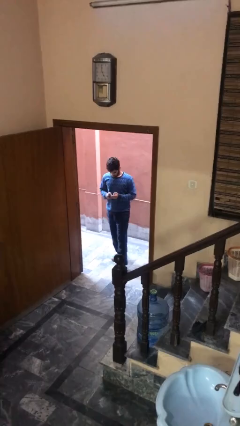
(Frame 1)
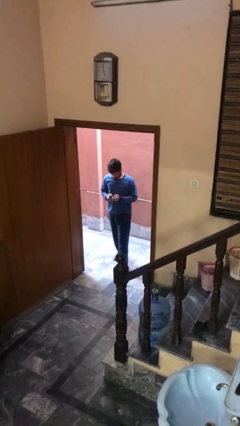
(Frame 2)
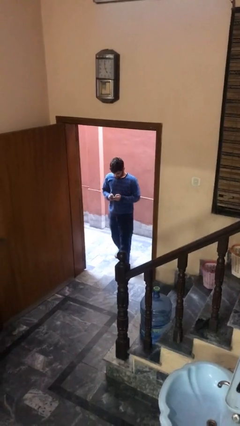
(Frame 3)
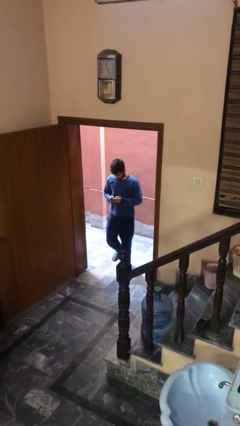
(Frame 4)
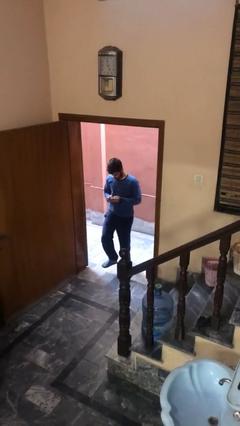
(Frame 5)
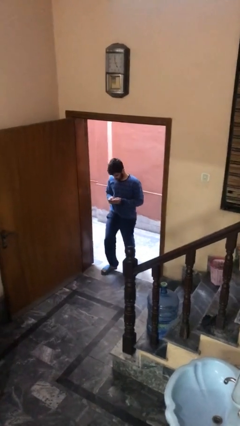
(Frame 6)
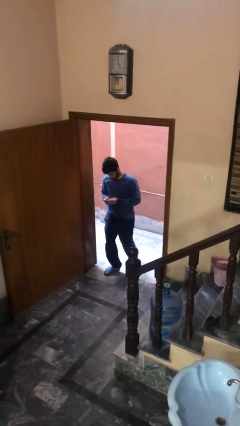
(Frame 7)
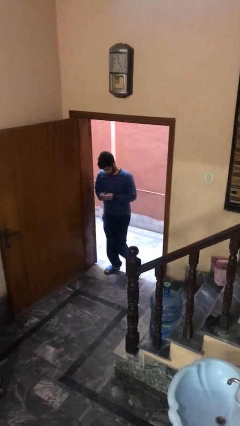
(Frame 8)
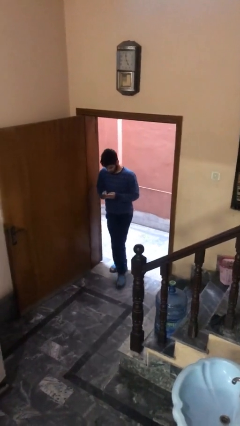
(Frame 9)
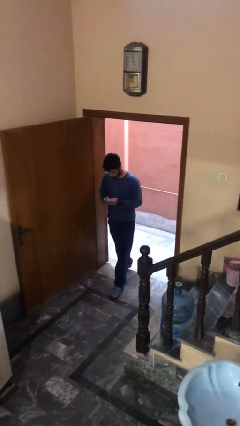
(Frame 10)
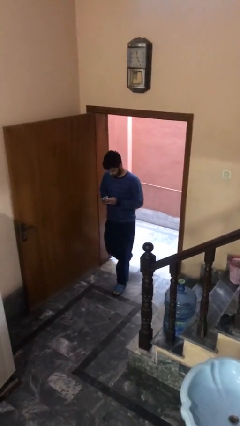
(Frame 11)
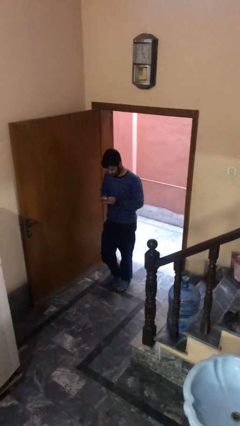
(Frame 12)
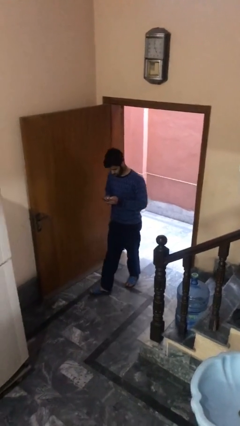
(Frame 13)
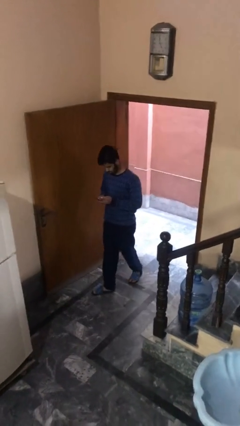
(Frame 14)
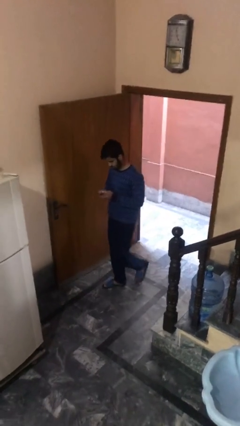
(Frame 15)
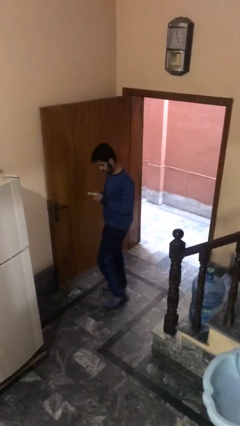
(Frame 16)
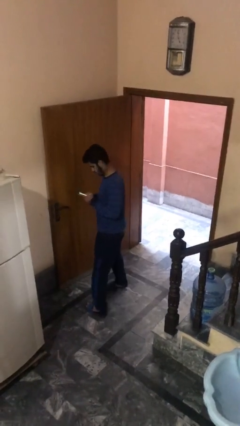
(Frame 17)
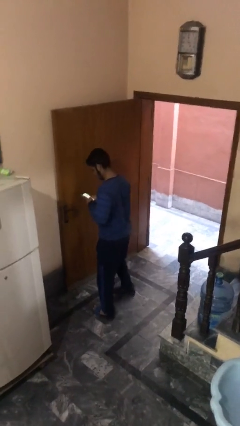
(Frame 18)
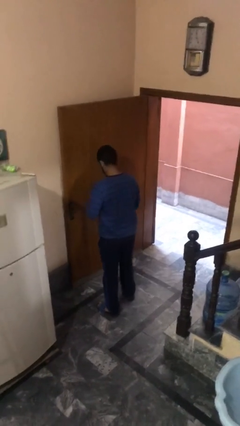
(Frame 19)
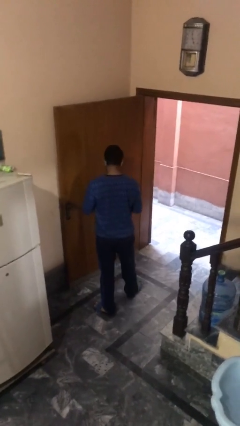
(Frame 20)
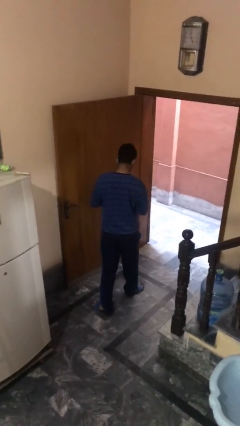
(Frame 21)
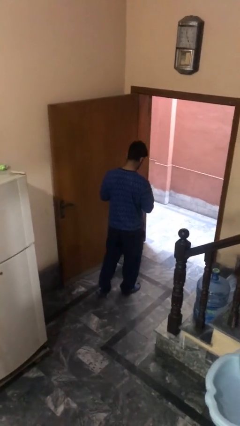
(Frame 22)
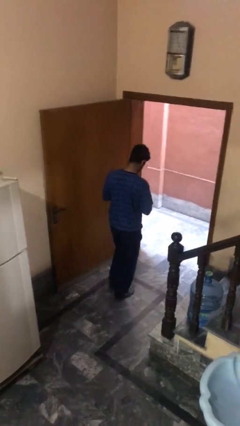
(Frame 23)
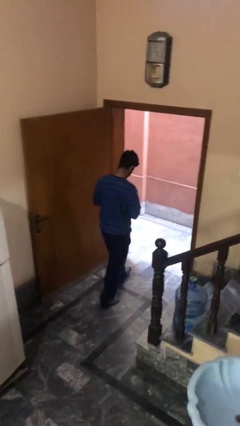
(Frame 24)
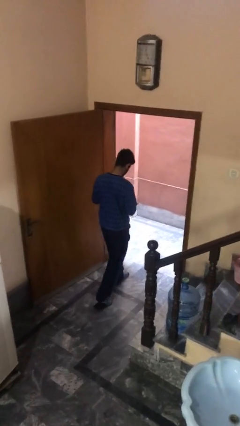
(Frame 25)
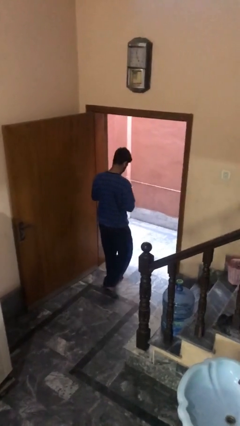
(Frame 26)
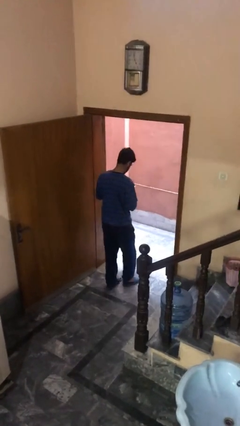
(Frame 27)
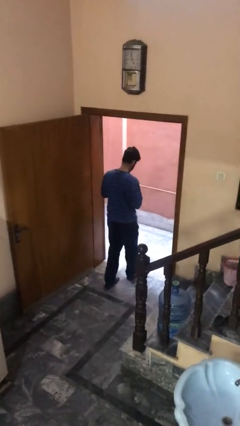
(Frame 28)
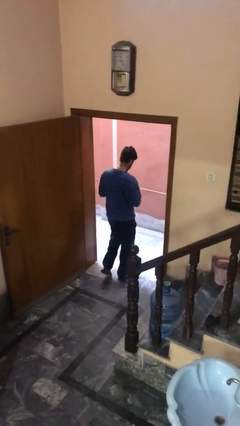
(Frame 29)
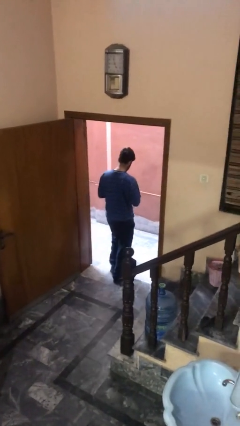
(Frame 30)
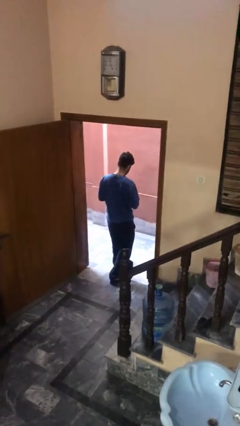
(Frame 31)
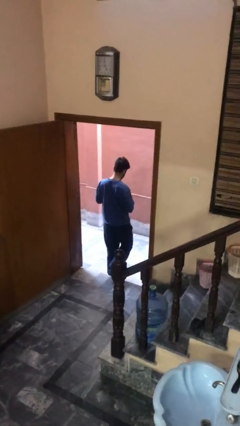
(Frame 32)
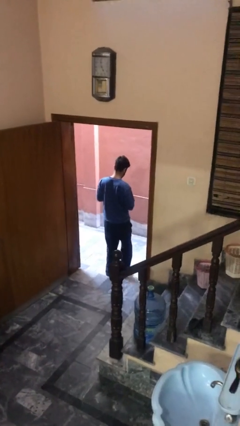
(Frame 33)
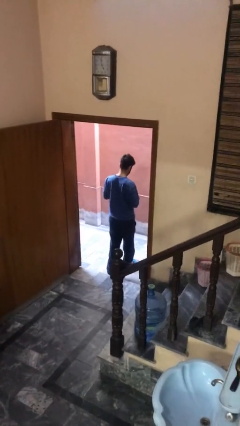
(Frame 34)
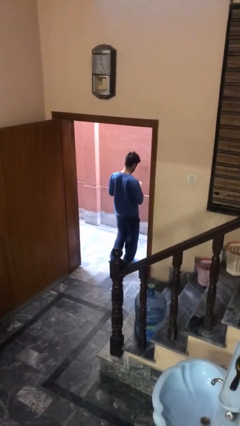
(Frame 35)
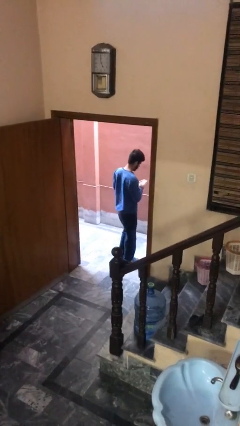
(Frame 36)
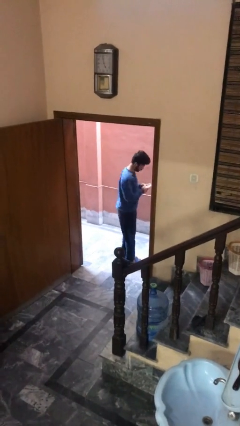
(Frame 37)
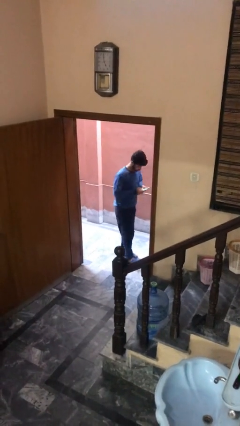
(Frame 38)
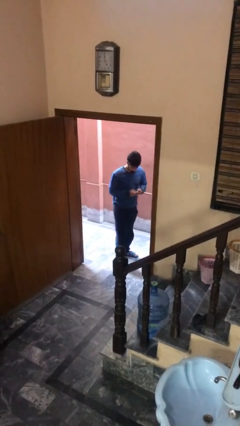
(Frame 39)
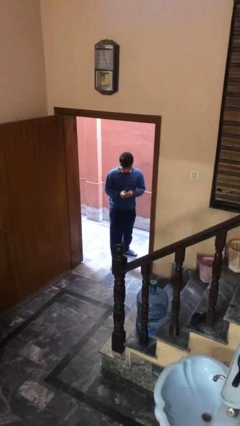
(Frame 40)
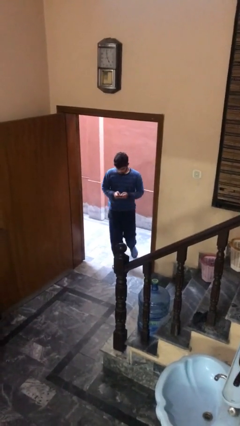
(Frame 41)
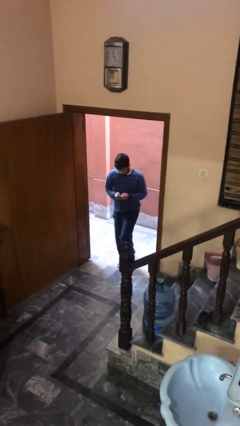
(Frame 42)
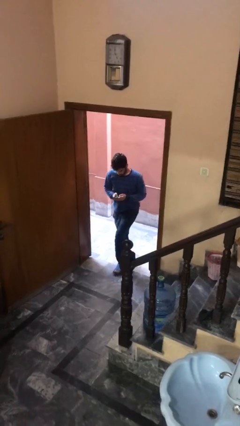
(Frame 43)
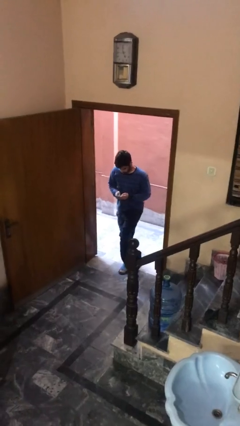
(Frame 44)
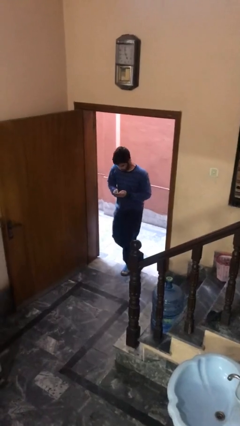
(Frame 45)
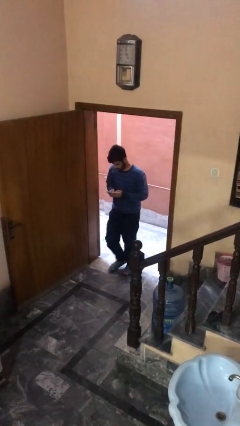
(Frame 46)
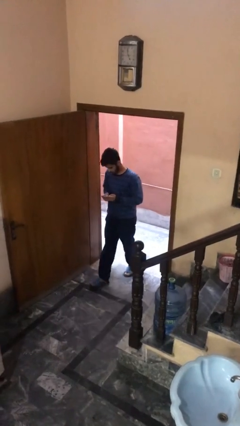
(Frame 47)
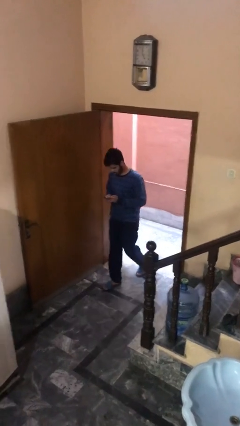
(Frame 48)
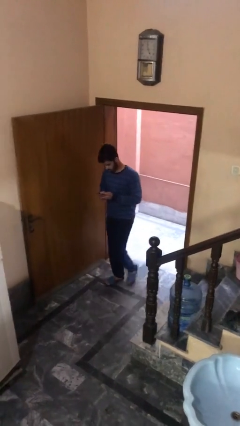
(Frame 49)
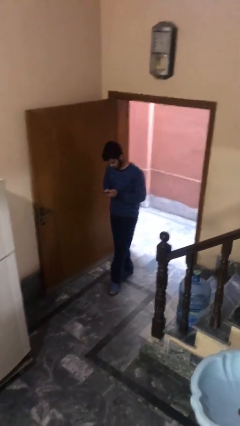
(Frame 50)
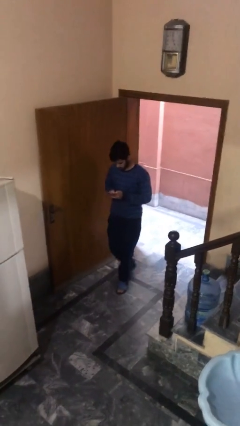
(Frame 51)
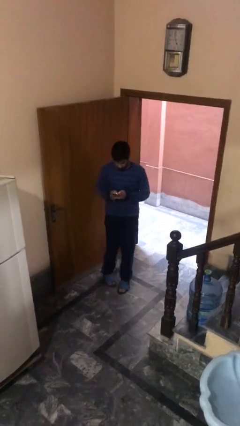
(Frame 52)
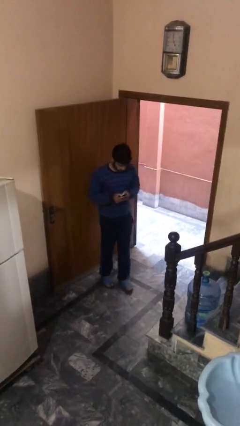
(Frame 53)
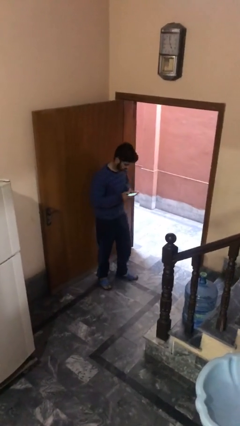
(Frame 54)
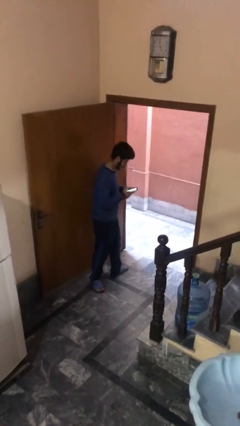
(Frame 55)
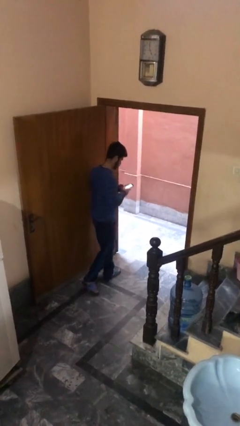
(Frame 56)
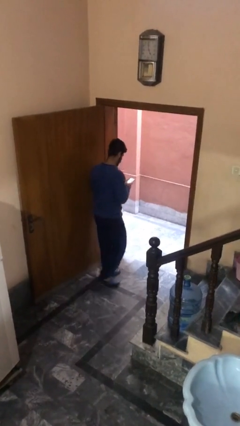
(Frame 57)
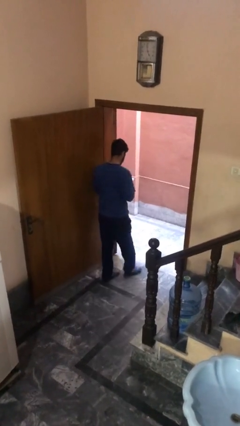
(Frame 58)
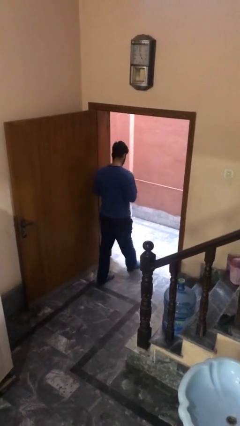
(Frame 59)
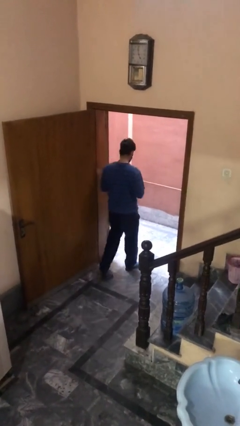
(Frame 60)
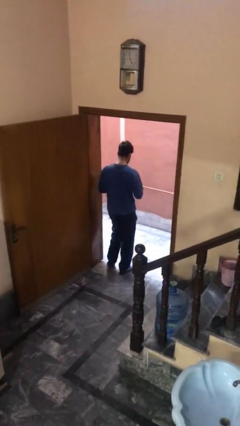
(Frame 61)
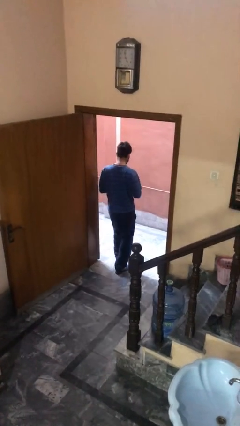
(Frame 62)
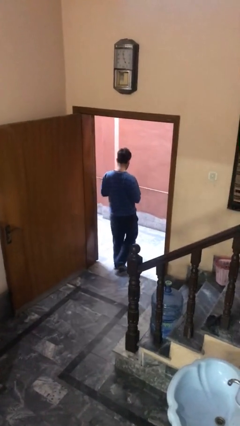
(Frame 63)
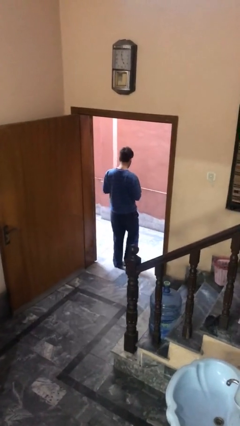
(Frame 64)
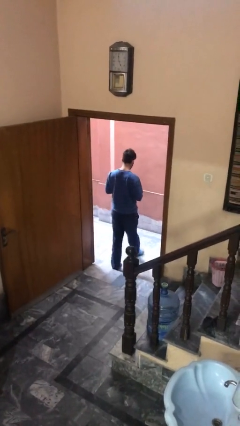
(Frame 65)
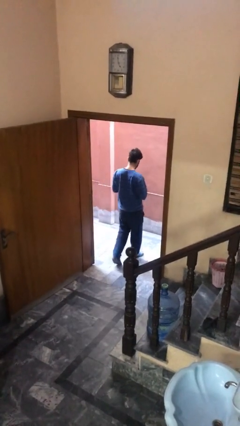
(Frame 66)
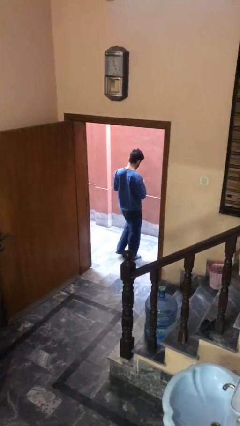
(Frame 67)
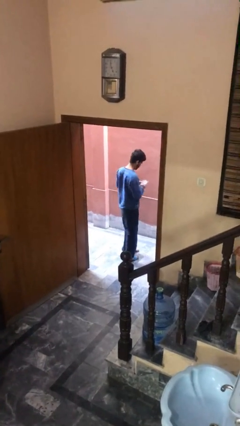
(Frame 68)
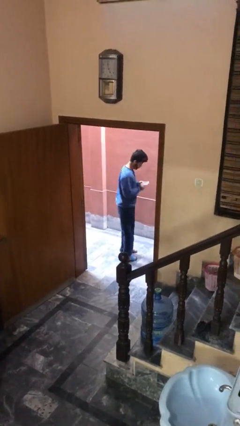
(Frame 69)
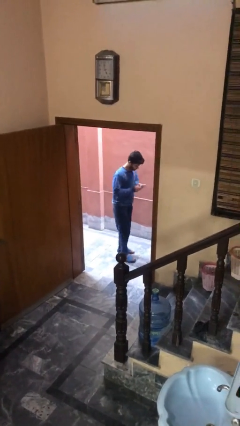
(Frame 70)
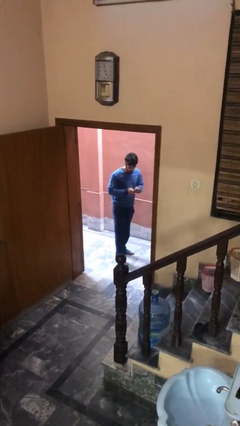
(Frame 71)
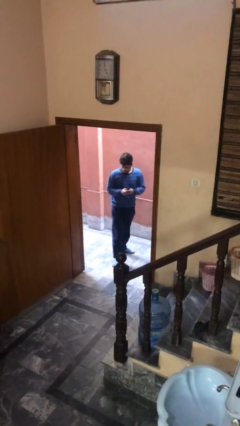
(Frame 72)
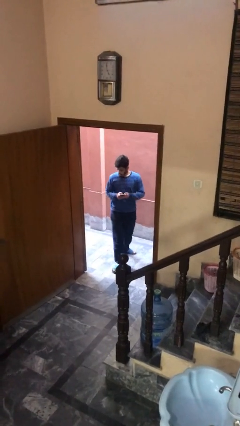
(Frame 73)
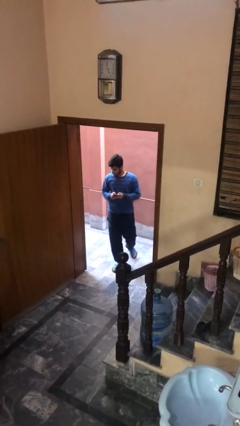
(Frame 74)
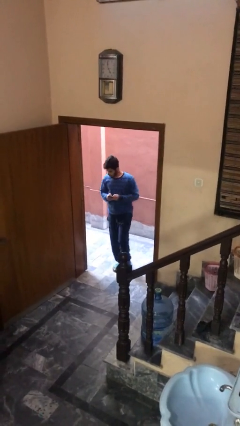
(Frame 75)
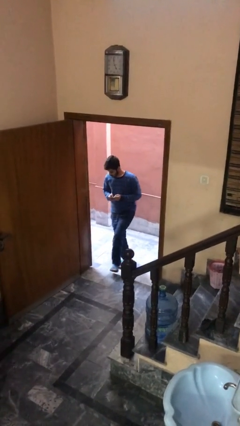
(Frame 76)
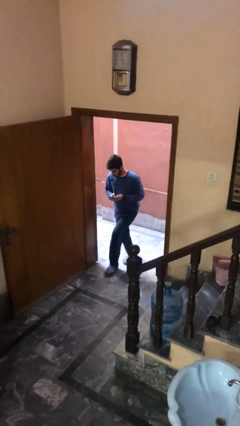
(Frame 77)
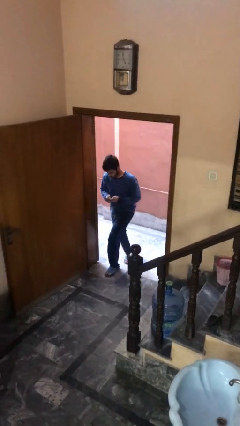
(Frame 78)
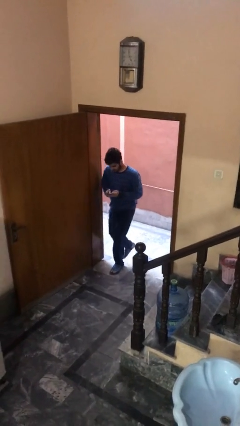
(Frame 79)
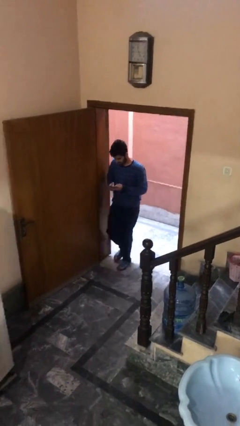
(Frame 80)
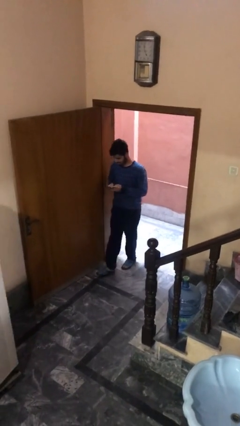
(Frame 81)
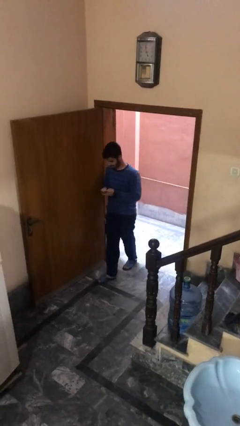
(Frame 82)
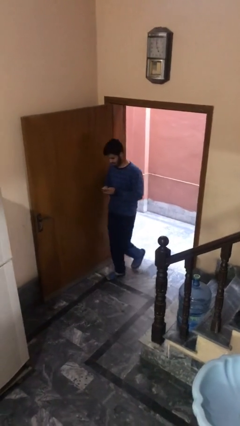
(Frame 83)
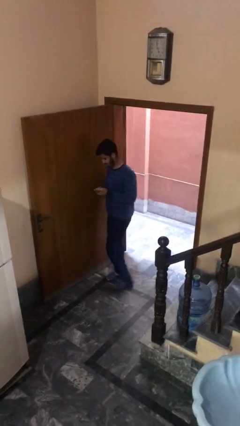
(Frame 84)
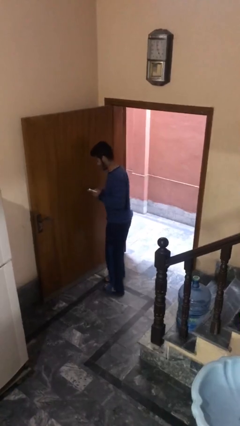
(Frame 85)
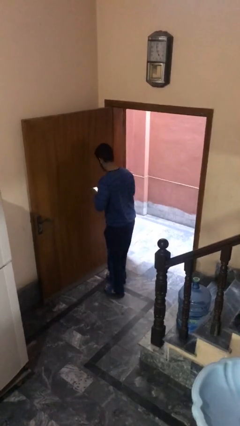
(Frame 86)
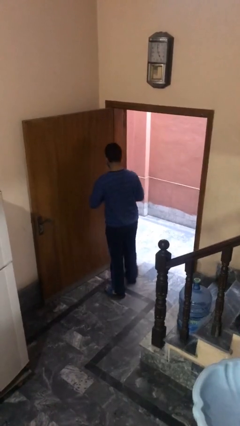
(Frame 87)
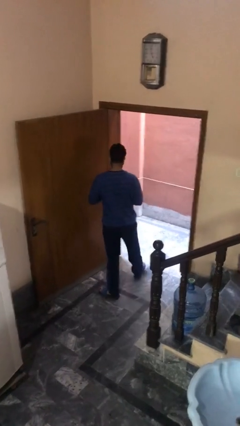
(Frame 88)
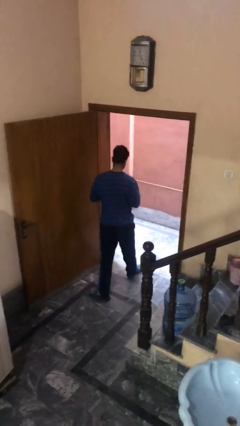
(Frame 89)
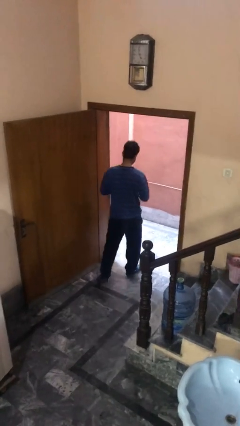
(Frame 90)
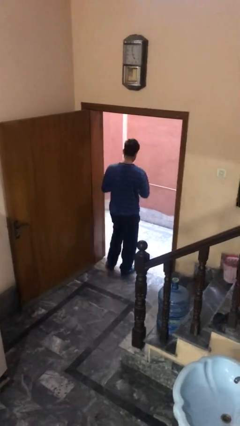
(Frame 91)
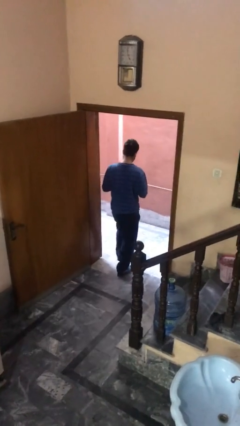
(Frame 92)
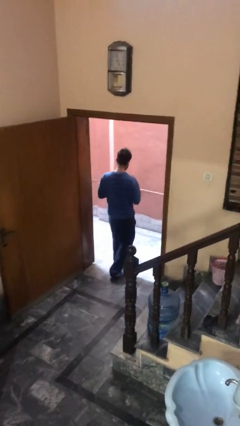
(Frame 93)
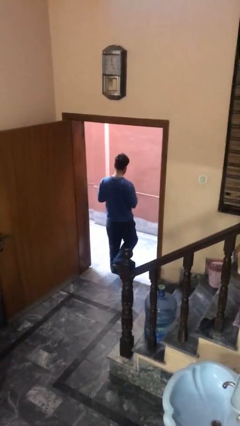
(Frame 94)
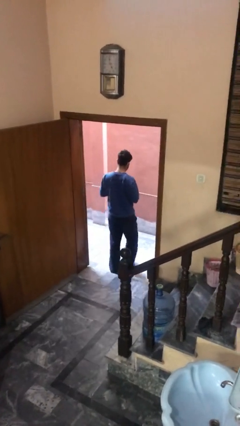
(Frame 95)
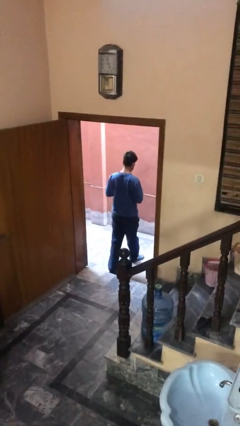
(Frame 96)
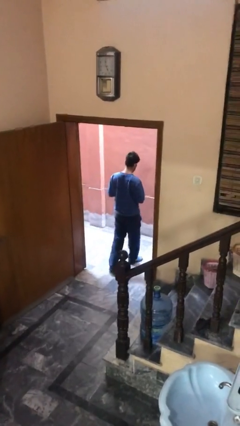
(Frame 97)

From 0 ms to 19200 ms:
person texts on phone
